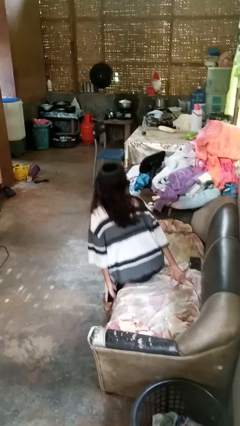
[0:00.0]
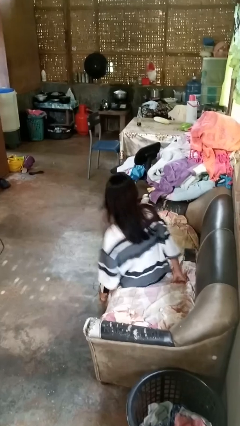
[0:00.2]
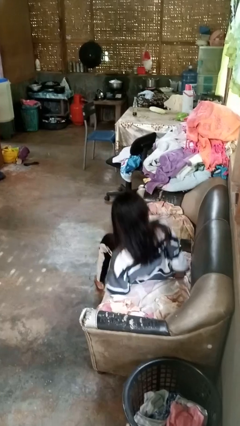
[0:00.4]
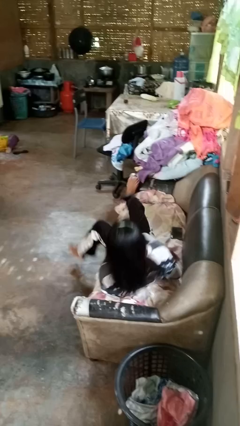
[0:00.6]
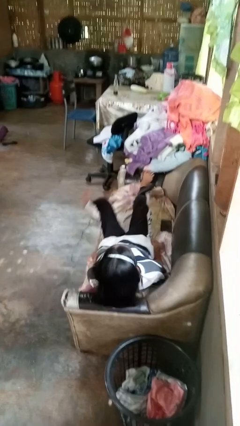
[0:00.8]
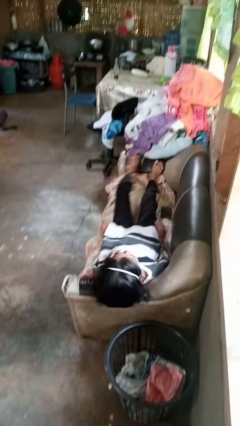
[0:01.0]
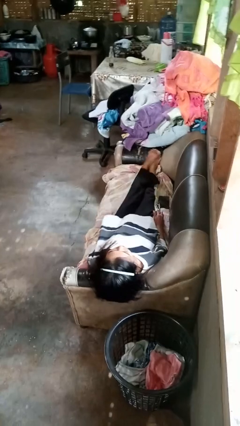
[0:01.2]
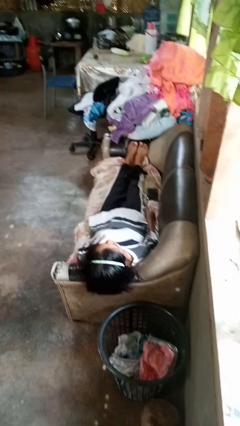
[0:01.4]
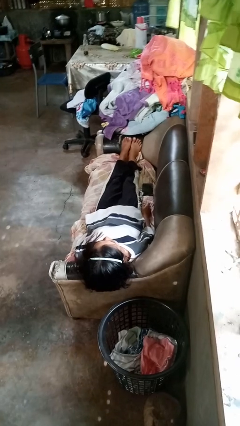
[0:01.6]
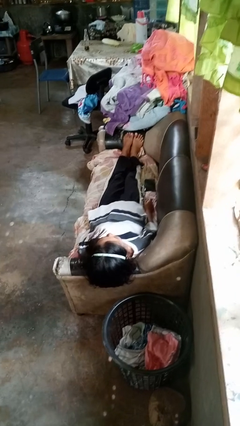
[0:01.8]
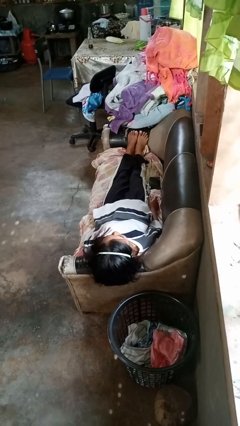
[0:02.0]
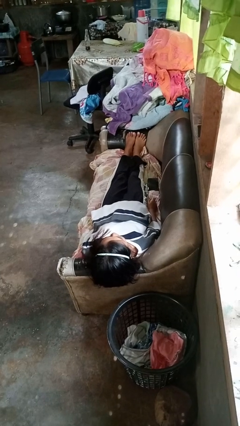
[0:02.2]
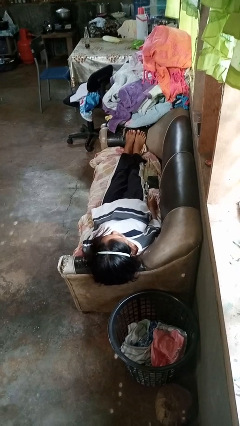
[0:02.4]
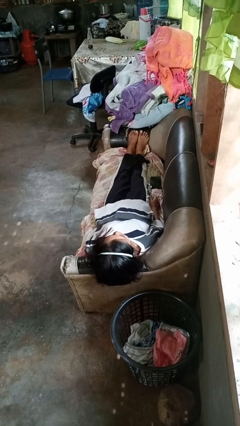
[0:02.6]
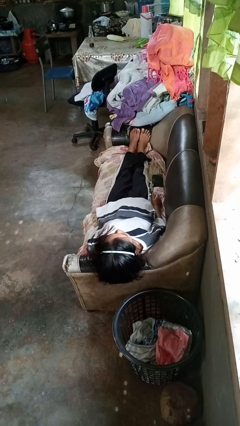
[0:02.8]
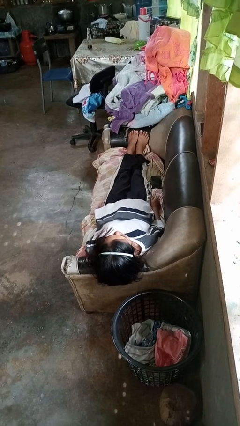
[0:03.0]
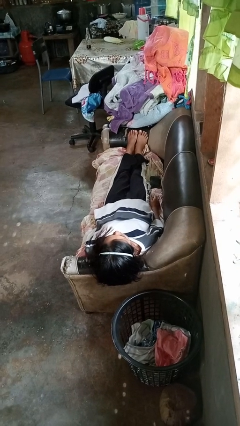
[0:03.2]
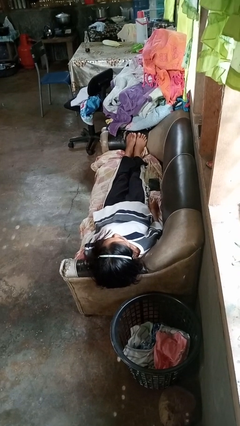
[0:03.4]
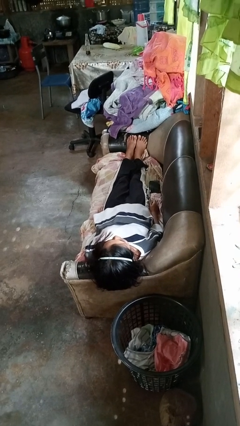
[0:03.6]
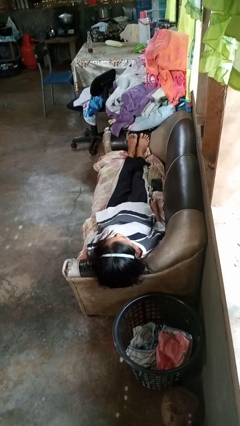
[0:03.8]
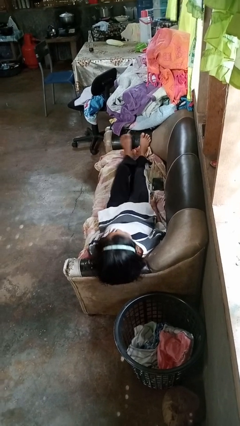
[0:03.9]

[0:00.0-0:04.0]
person lies down on couch

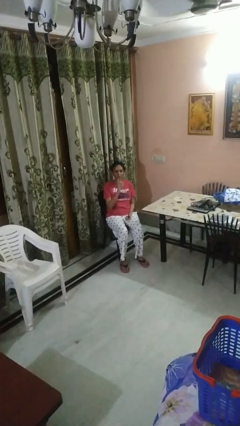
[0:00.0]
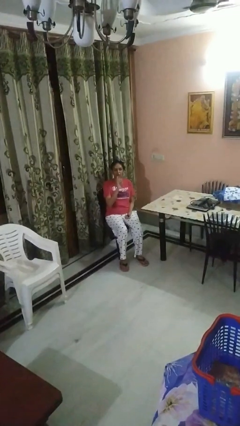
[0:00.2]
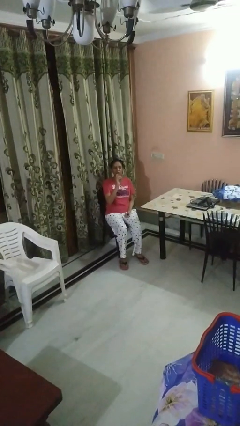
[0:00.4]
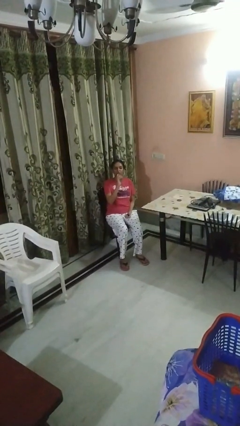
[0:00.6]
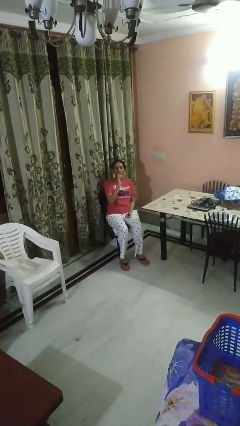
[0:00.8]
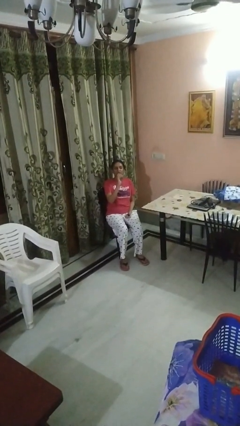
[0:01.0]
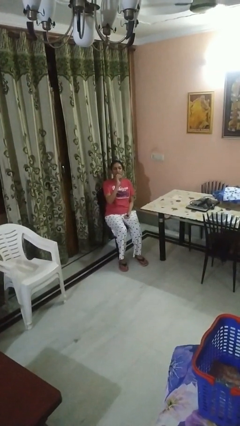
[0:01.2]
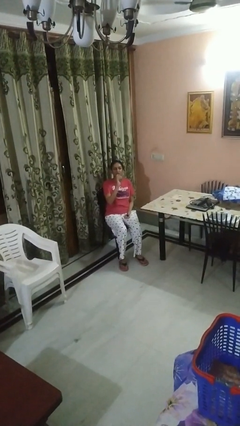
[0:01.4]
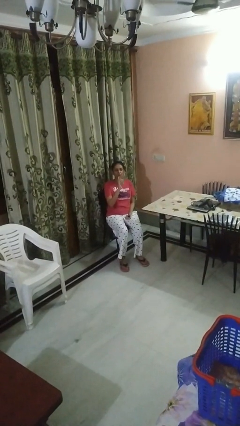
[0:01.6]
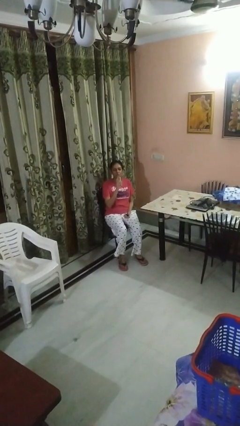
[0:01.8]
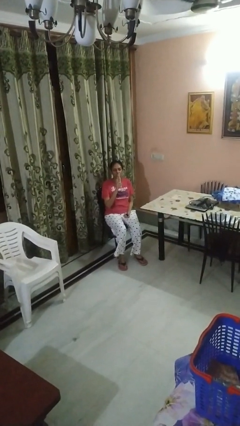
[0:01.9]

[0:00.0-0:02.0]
person drinks from bottle

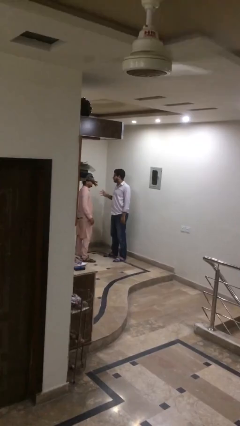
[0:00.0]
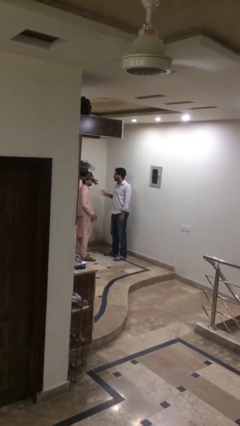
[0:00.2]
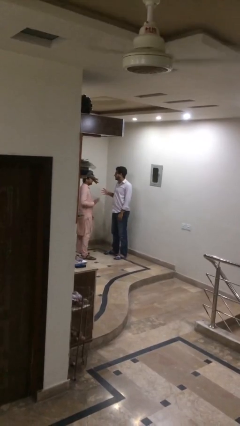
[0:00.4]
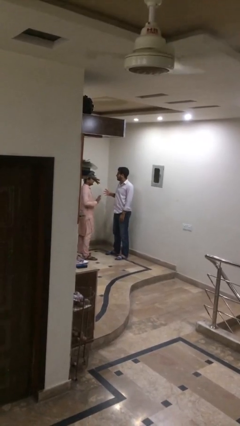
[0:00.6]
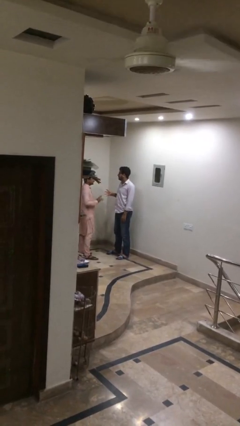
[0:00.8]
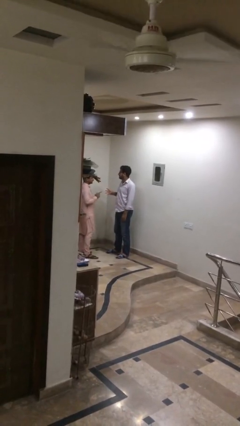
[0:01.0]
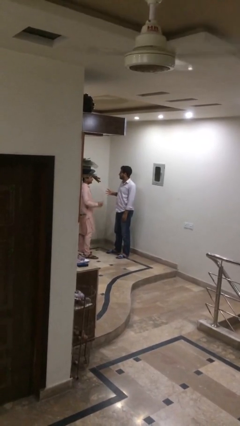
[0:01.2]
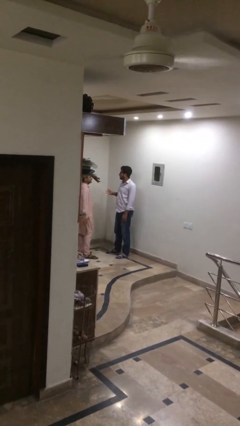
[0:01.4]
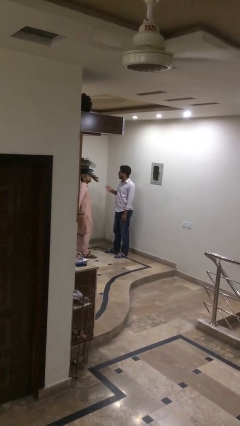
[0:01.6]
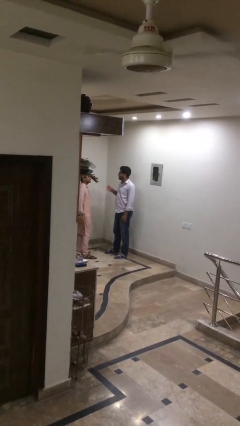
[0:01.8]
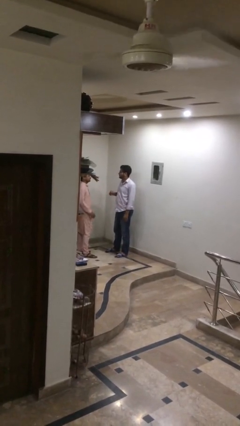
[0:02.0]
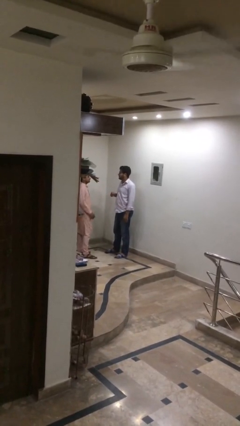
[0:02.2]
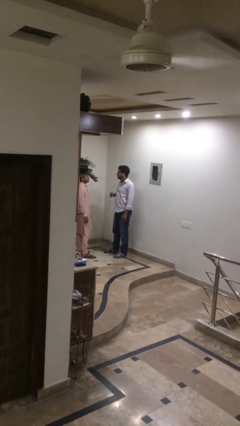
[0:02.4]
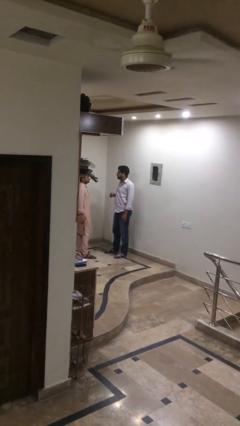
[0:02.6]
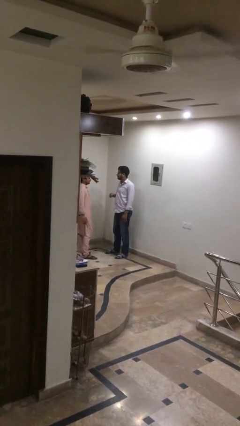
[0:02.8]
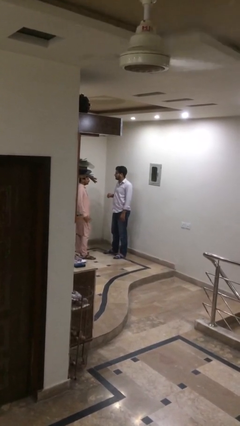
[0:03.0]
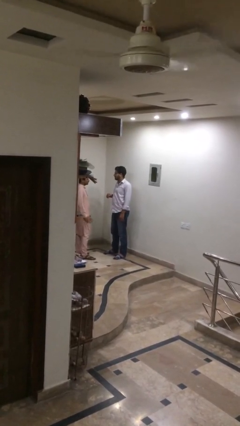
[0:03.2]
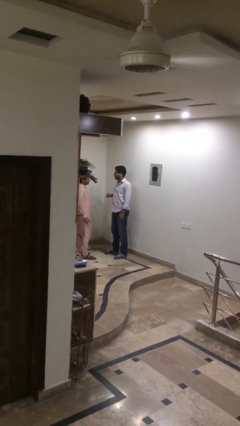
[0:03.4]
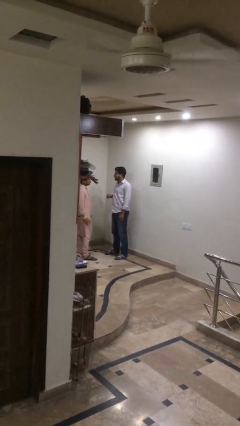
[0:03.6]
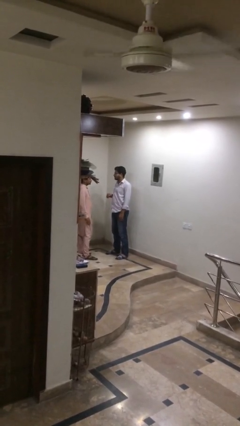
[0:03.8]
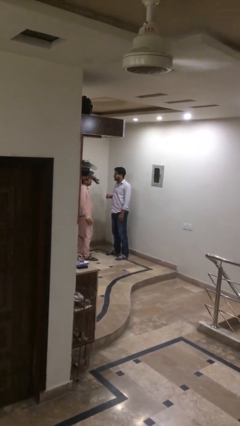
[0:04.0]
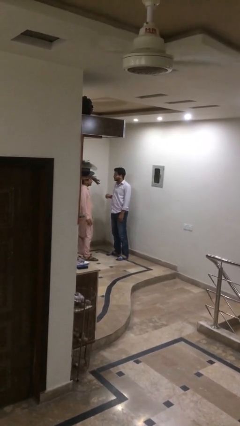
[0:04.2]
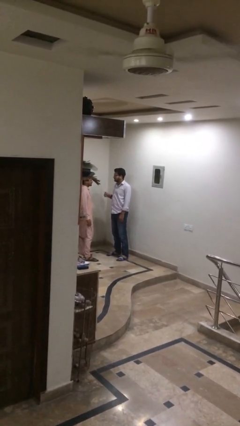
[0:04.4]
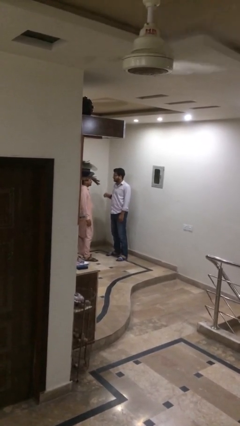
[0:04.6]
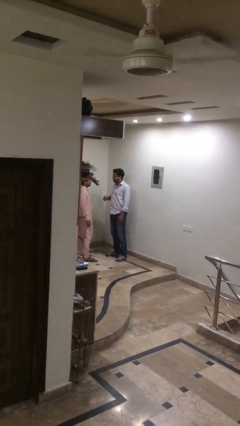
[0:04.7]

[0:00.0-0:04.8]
person talks to person

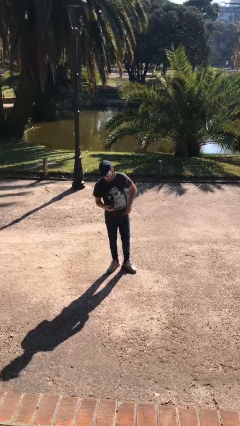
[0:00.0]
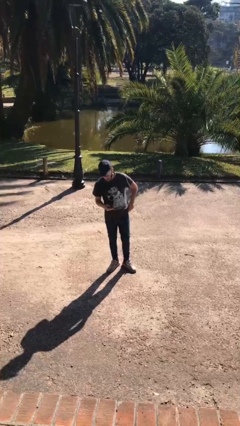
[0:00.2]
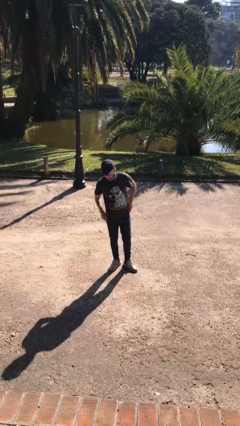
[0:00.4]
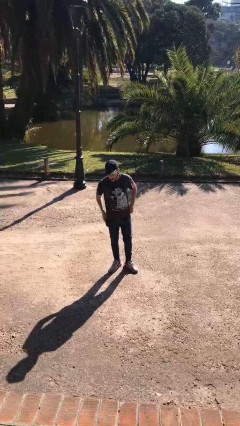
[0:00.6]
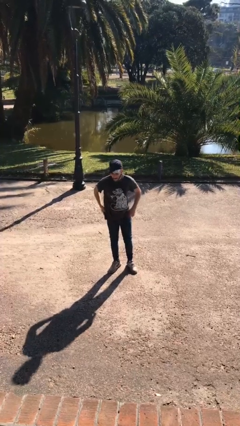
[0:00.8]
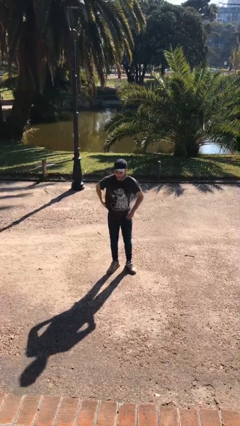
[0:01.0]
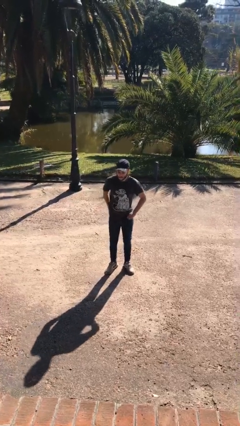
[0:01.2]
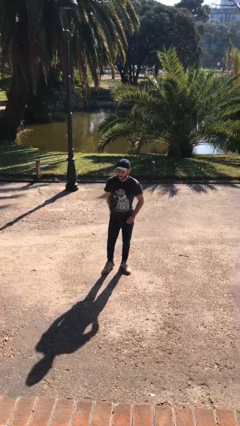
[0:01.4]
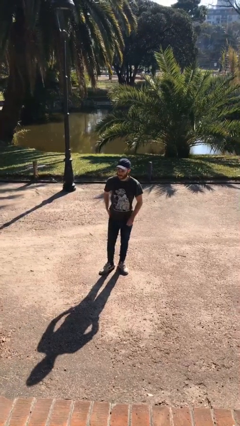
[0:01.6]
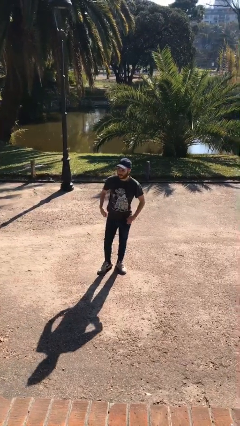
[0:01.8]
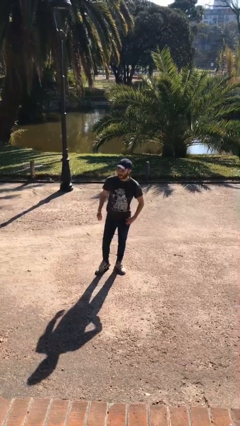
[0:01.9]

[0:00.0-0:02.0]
person puts phone into pocket

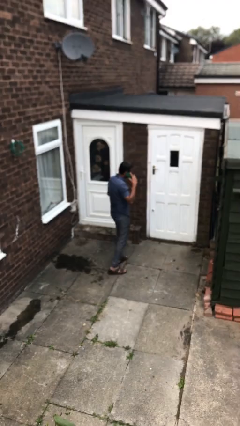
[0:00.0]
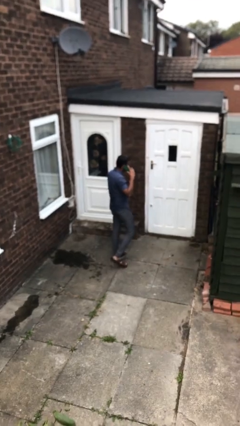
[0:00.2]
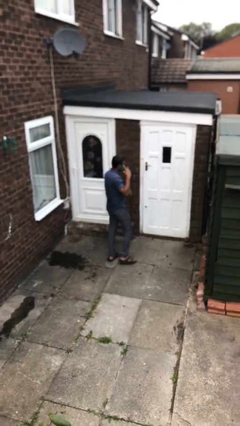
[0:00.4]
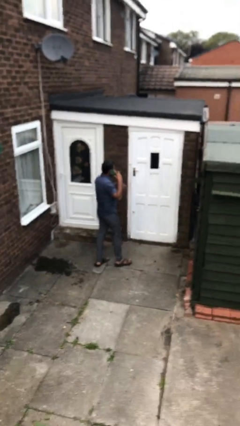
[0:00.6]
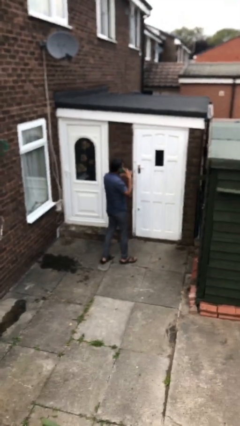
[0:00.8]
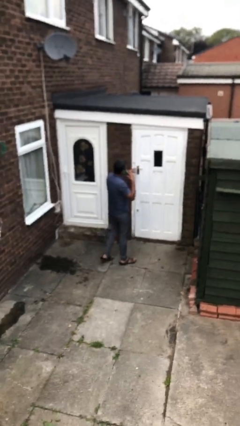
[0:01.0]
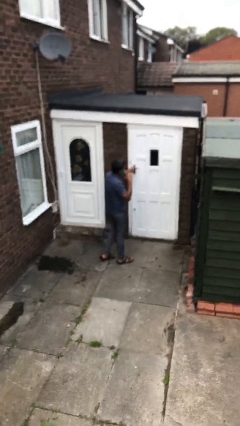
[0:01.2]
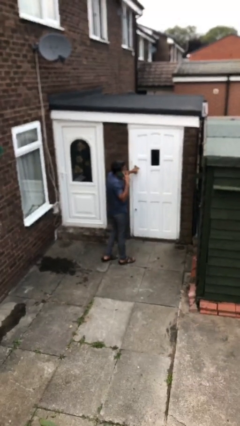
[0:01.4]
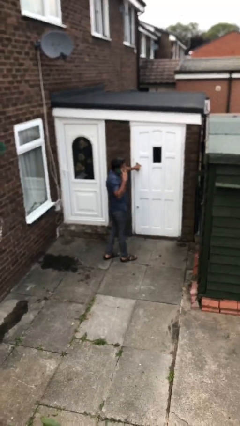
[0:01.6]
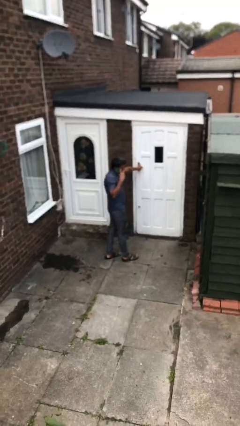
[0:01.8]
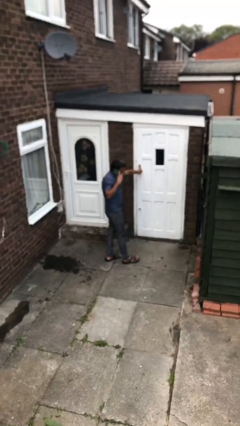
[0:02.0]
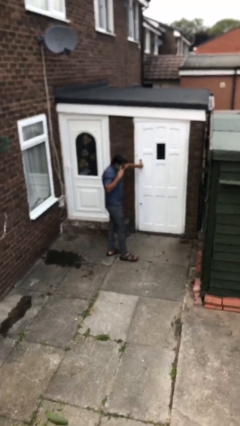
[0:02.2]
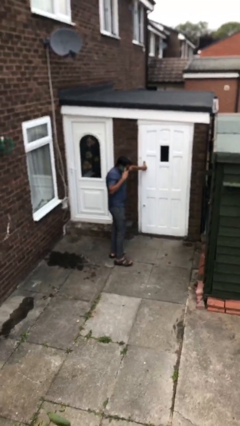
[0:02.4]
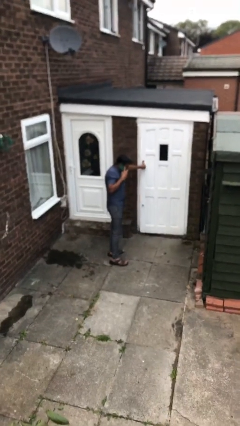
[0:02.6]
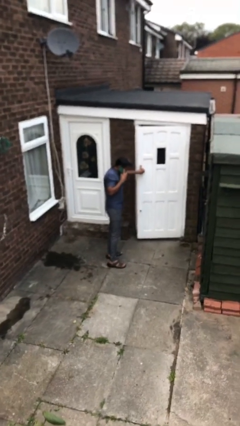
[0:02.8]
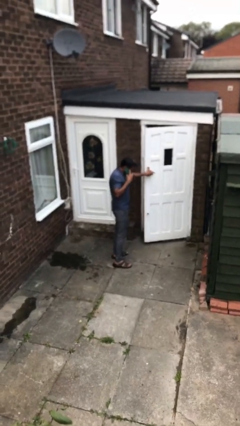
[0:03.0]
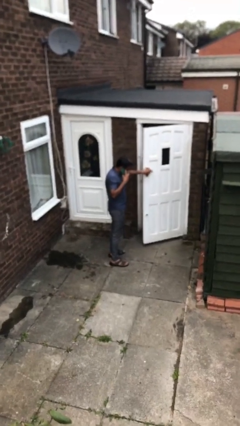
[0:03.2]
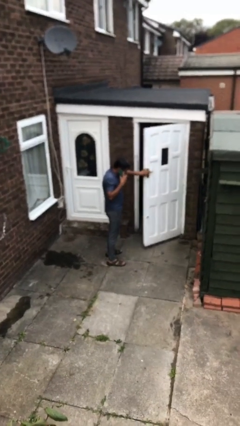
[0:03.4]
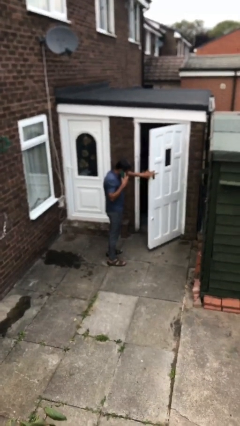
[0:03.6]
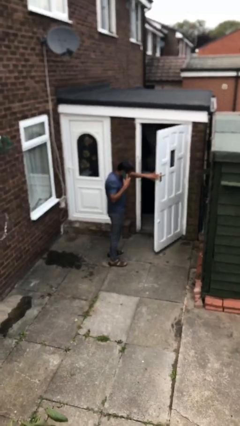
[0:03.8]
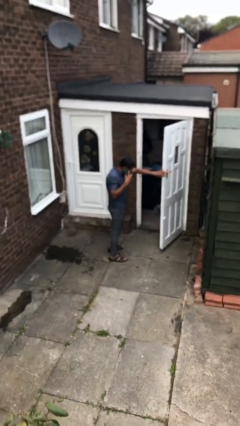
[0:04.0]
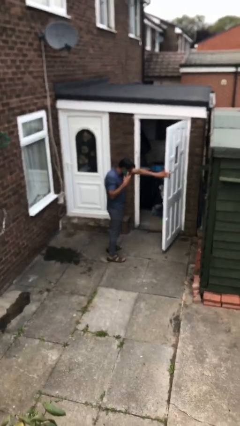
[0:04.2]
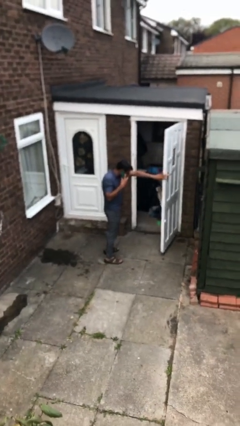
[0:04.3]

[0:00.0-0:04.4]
person opens facility door

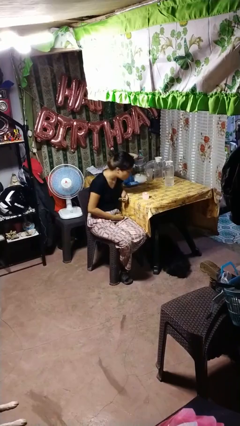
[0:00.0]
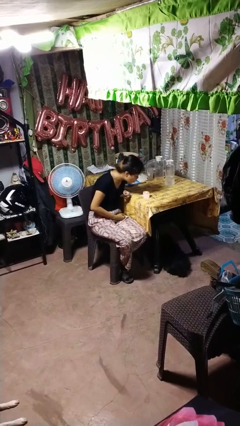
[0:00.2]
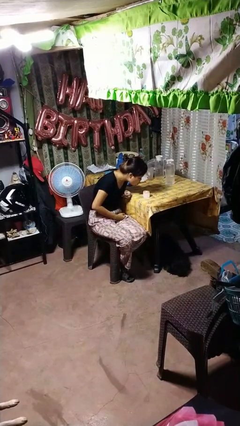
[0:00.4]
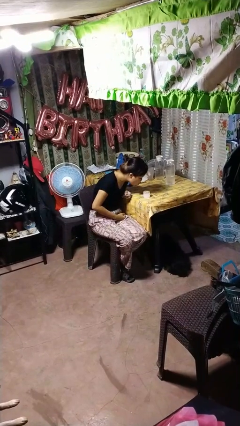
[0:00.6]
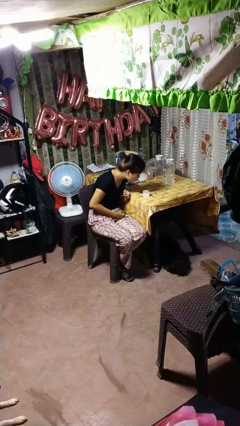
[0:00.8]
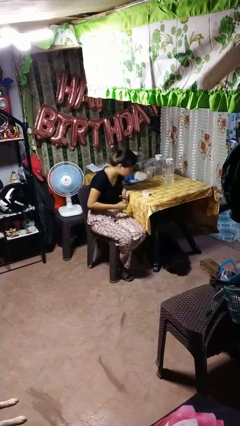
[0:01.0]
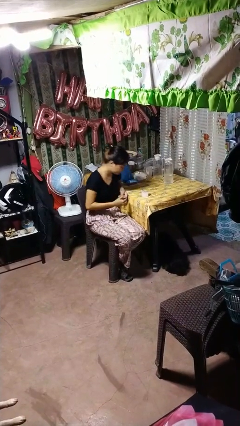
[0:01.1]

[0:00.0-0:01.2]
person extinguishes candle
